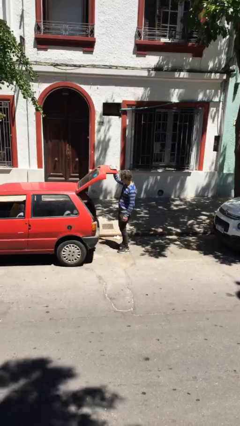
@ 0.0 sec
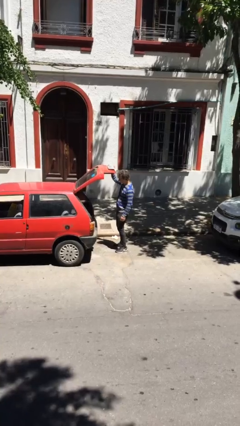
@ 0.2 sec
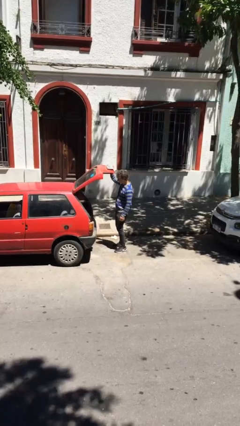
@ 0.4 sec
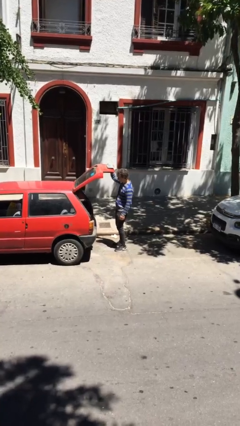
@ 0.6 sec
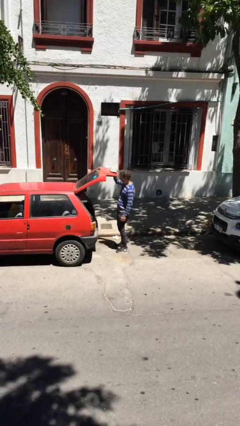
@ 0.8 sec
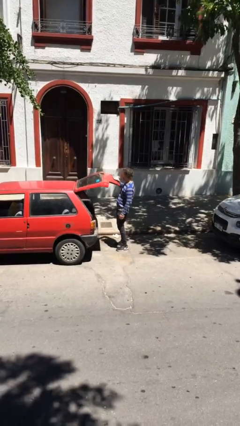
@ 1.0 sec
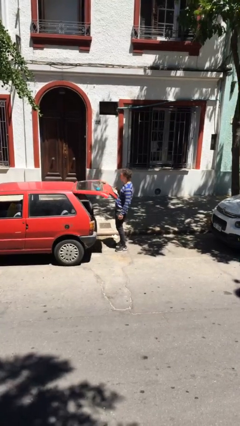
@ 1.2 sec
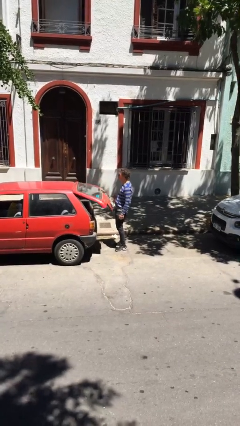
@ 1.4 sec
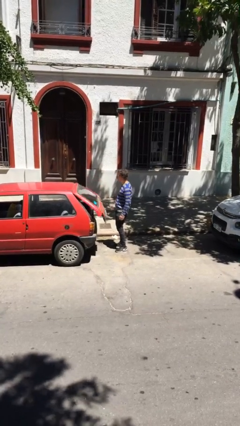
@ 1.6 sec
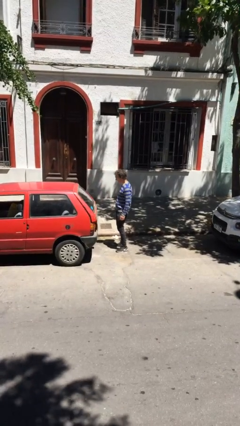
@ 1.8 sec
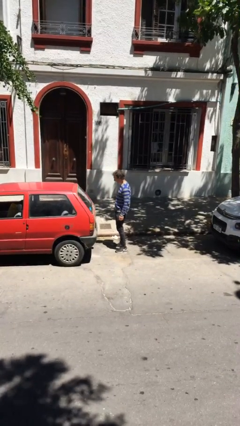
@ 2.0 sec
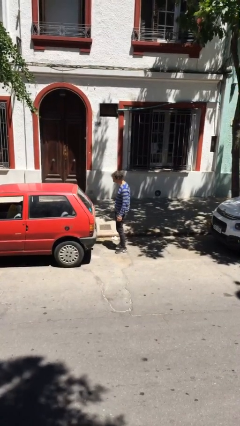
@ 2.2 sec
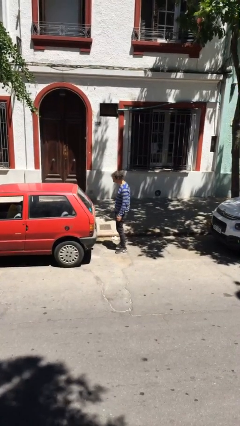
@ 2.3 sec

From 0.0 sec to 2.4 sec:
person closes car trunk

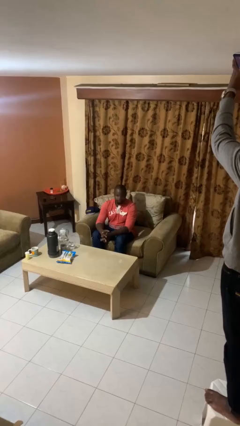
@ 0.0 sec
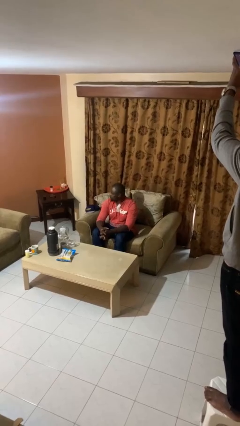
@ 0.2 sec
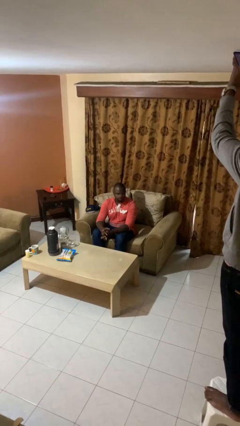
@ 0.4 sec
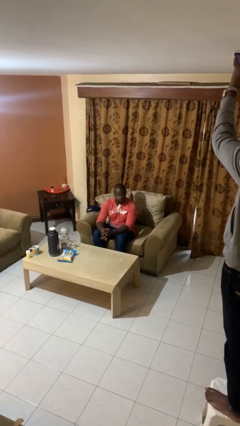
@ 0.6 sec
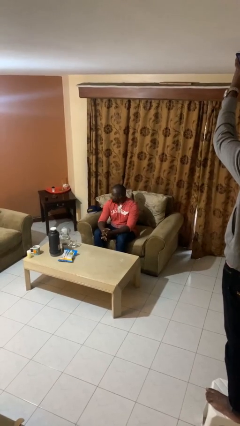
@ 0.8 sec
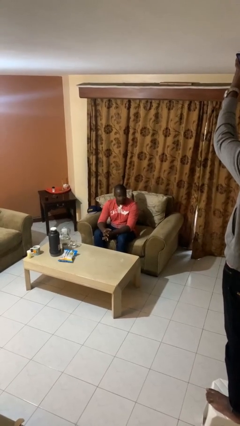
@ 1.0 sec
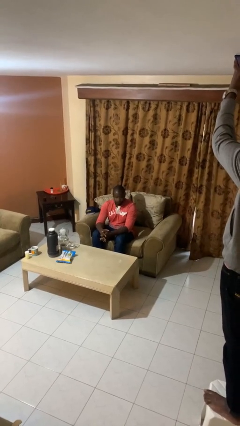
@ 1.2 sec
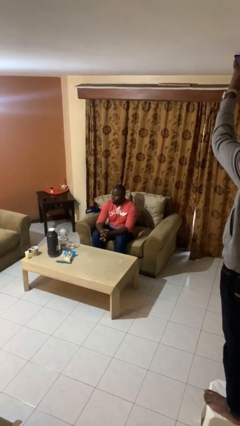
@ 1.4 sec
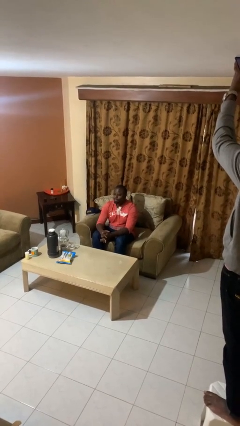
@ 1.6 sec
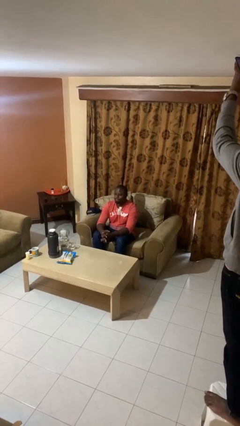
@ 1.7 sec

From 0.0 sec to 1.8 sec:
person shakes head

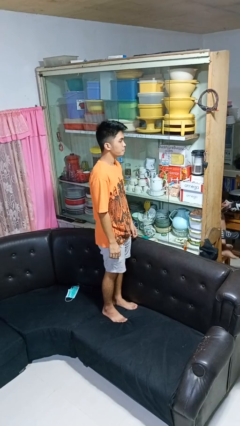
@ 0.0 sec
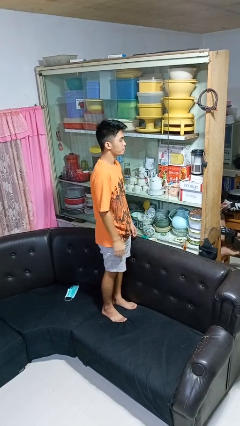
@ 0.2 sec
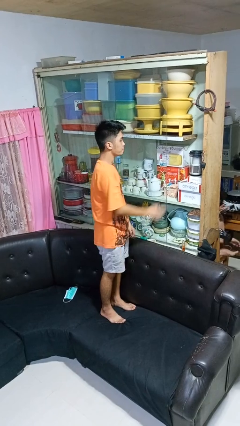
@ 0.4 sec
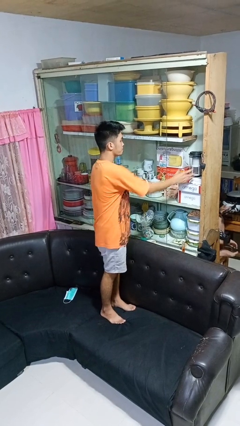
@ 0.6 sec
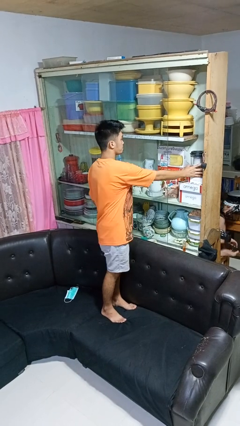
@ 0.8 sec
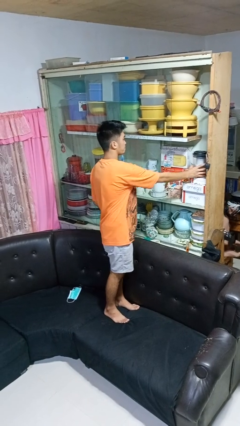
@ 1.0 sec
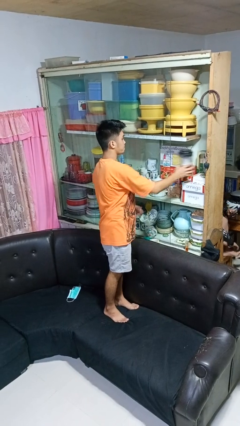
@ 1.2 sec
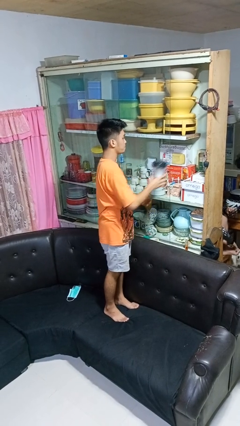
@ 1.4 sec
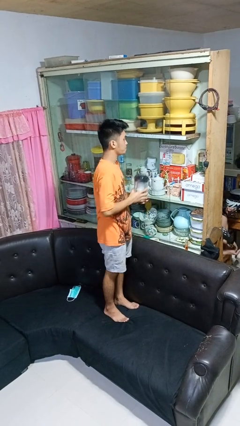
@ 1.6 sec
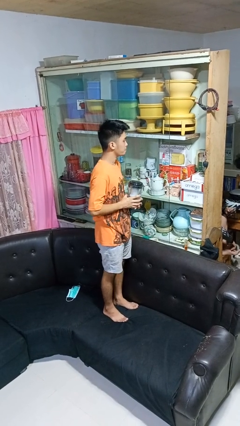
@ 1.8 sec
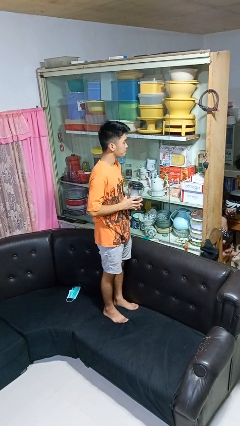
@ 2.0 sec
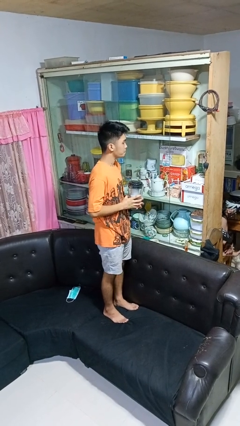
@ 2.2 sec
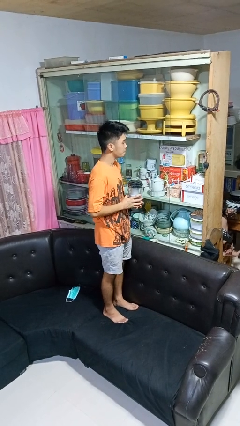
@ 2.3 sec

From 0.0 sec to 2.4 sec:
person picks up object from cabinet

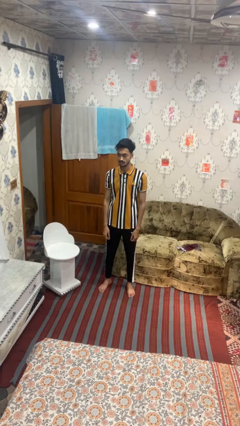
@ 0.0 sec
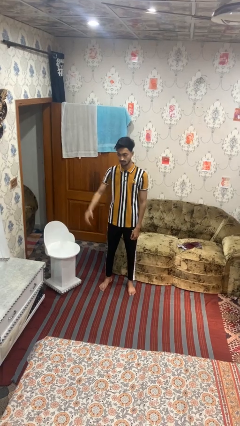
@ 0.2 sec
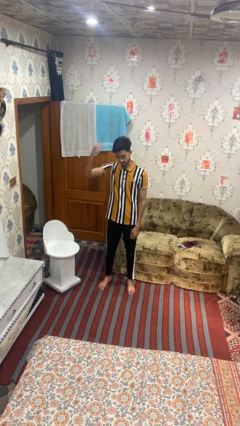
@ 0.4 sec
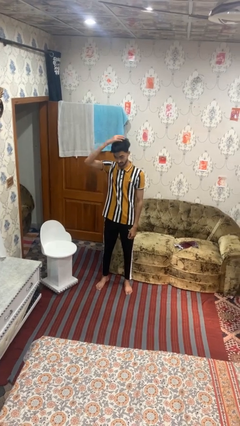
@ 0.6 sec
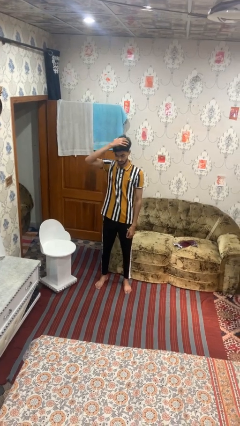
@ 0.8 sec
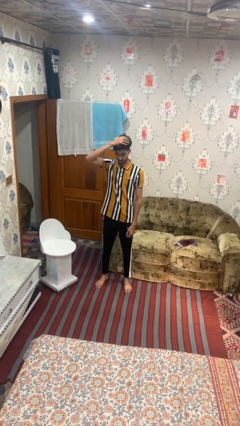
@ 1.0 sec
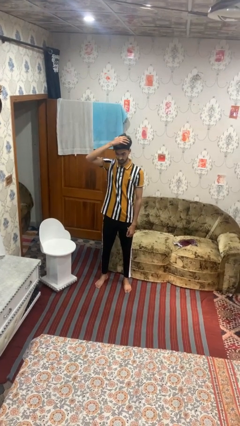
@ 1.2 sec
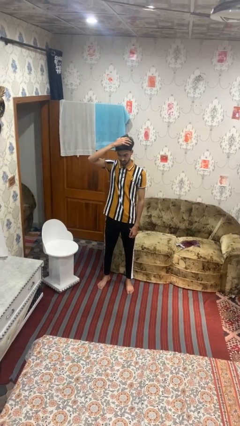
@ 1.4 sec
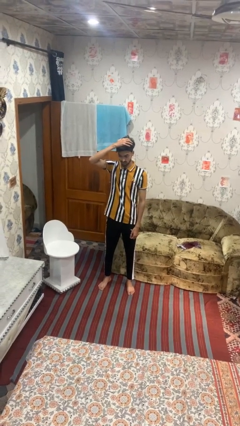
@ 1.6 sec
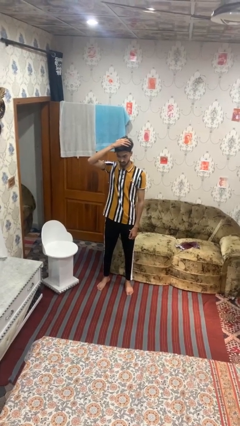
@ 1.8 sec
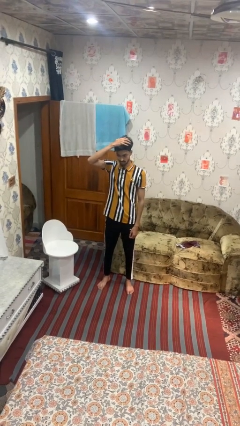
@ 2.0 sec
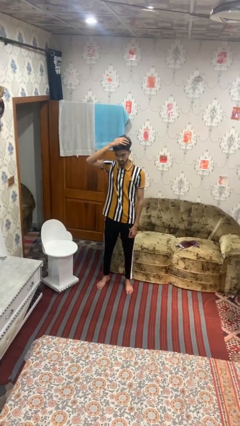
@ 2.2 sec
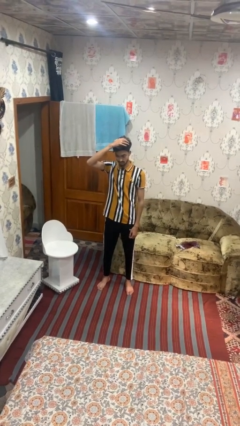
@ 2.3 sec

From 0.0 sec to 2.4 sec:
person pats head

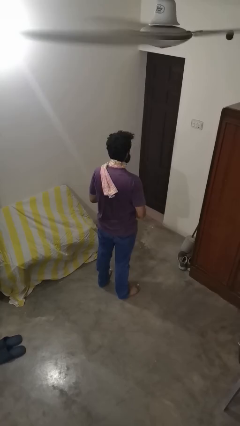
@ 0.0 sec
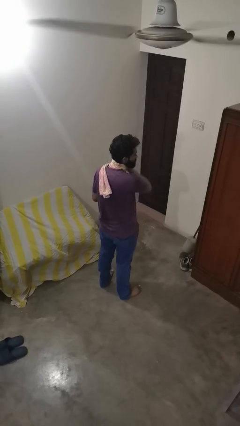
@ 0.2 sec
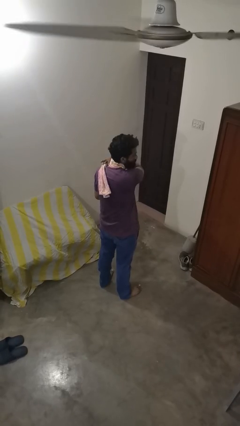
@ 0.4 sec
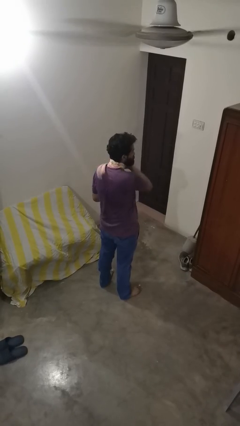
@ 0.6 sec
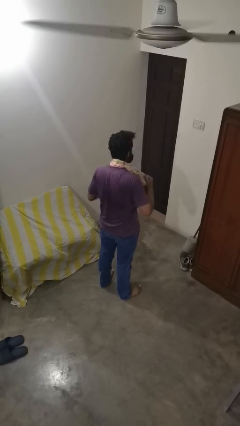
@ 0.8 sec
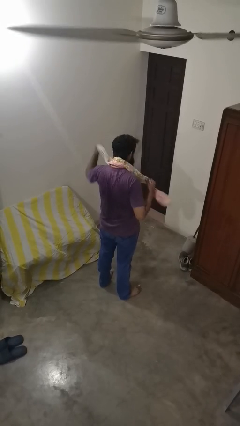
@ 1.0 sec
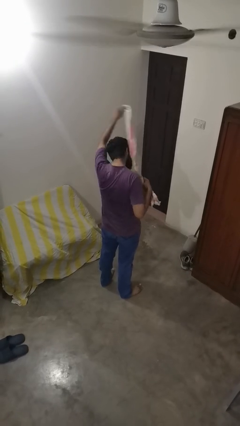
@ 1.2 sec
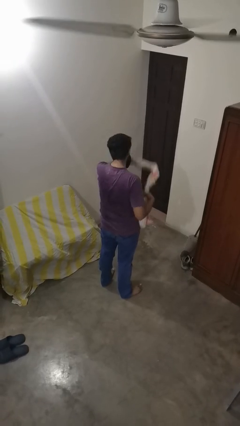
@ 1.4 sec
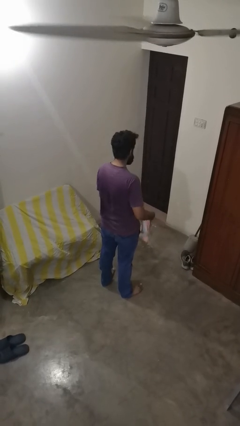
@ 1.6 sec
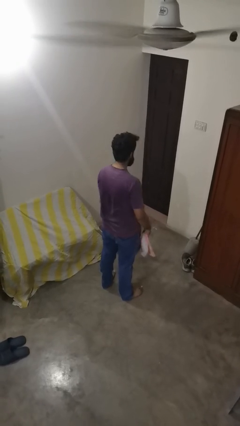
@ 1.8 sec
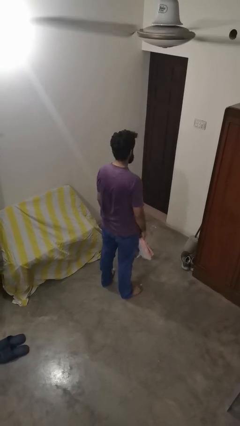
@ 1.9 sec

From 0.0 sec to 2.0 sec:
person takes off scarf

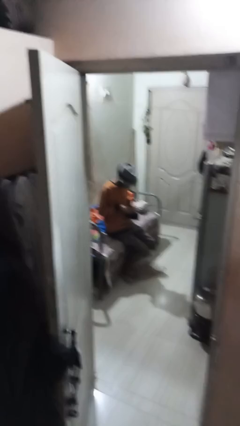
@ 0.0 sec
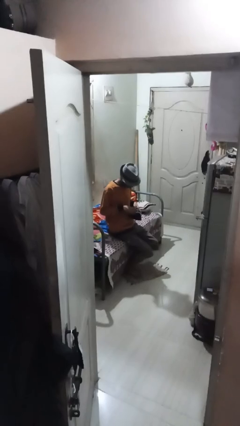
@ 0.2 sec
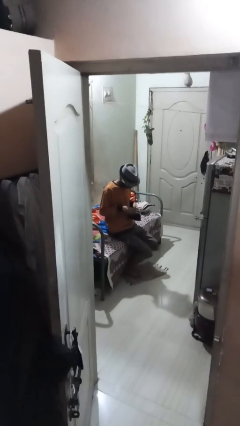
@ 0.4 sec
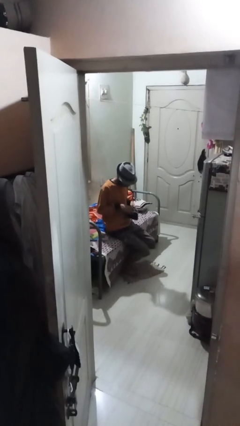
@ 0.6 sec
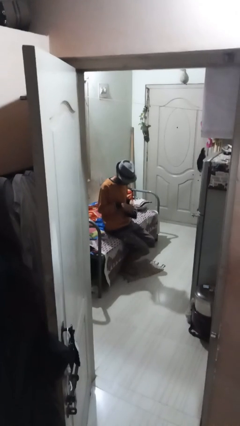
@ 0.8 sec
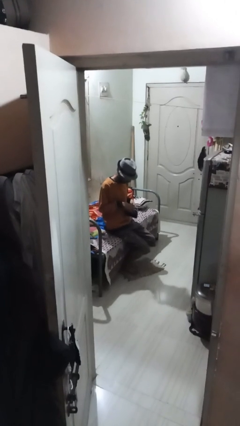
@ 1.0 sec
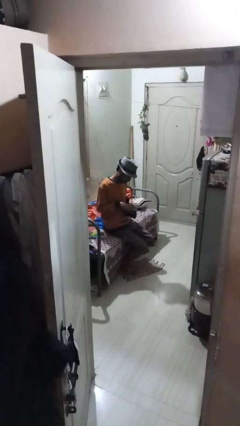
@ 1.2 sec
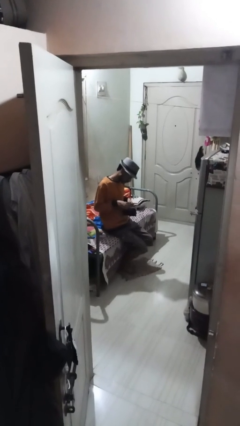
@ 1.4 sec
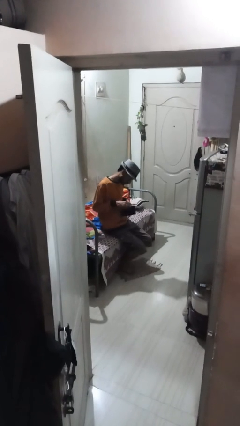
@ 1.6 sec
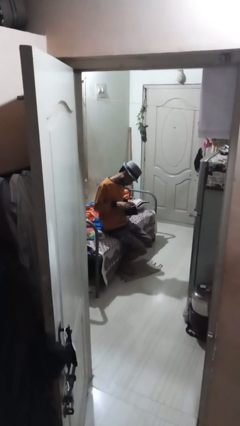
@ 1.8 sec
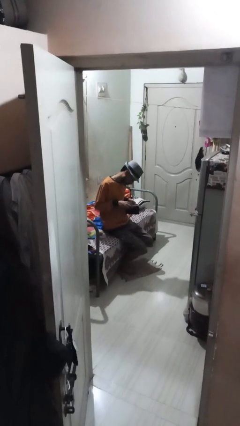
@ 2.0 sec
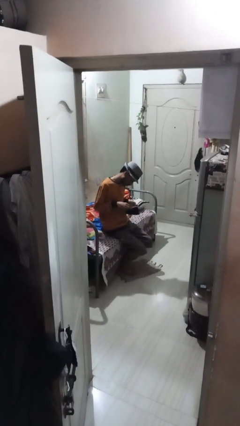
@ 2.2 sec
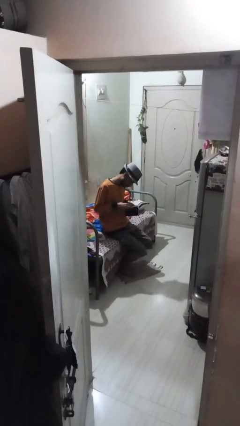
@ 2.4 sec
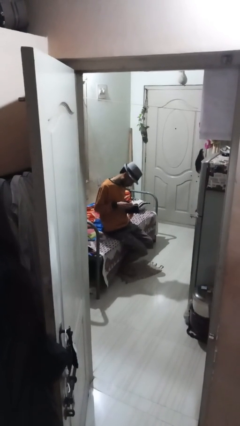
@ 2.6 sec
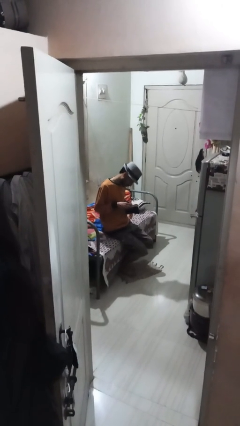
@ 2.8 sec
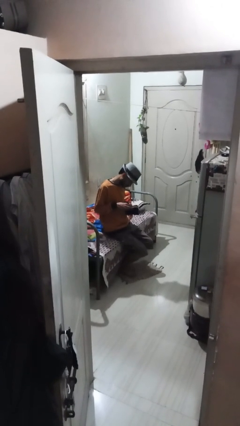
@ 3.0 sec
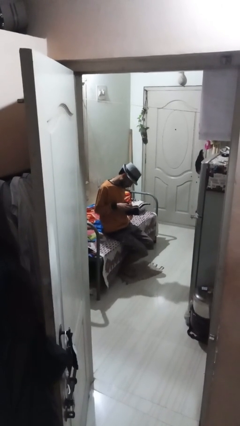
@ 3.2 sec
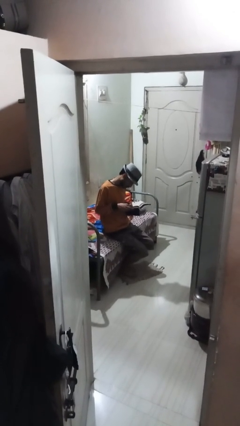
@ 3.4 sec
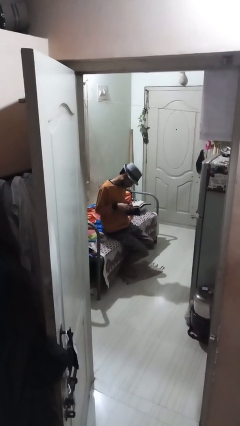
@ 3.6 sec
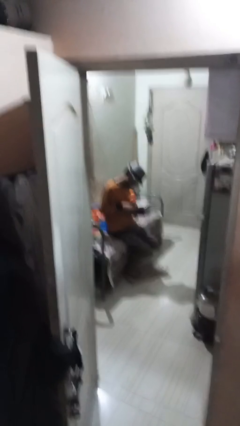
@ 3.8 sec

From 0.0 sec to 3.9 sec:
person searches in purse

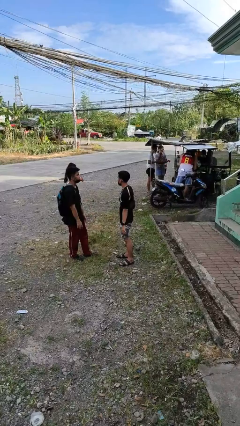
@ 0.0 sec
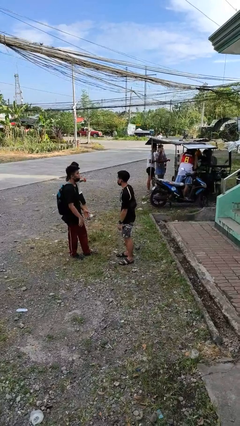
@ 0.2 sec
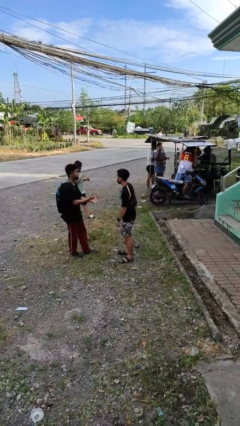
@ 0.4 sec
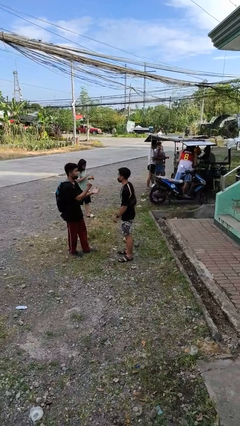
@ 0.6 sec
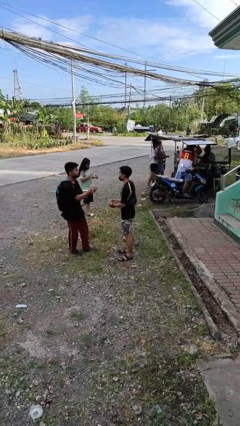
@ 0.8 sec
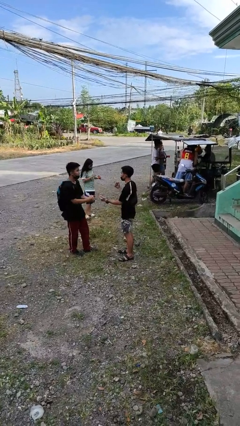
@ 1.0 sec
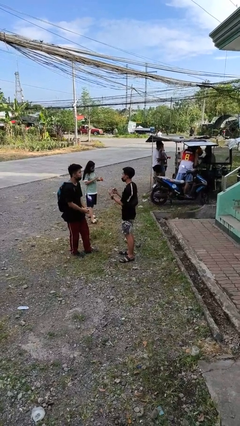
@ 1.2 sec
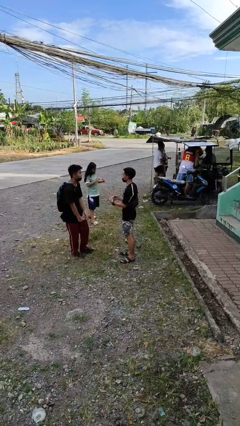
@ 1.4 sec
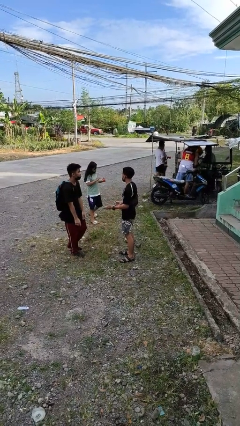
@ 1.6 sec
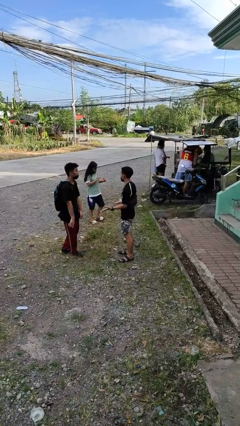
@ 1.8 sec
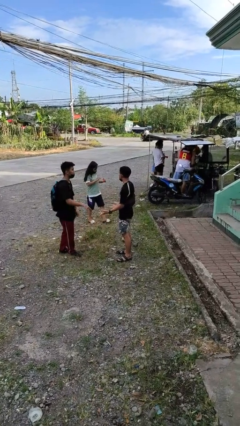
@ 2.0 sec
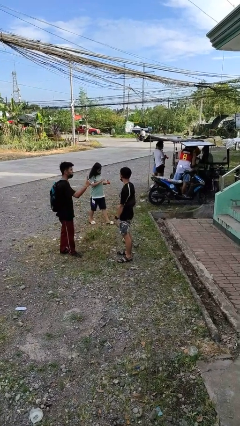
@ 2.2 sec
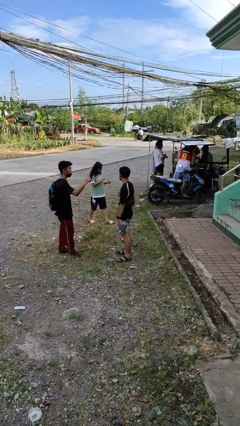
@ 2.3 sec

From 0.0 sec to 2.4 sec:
person talks to person
